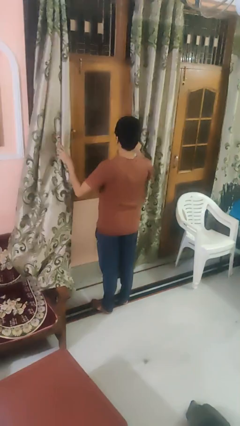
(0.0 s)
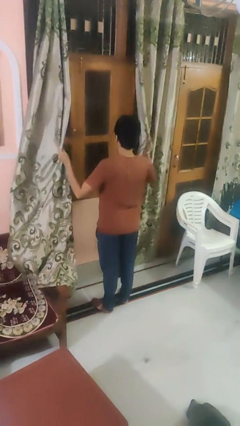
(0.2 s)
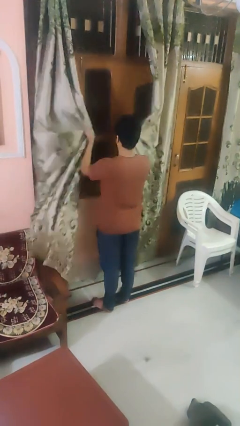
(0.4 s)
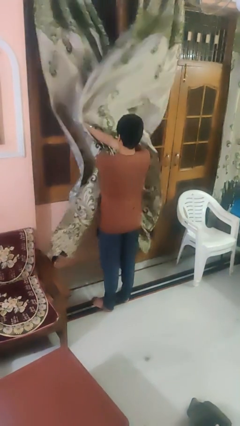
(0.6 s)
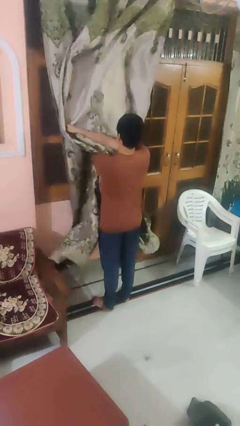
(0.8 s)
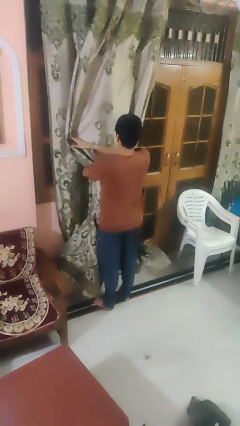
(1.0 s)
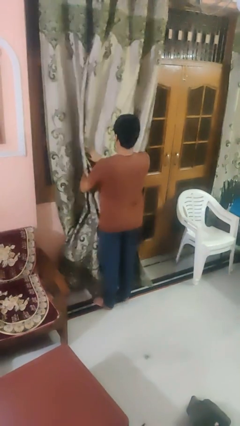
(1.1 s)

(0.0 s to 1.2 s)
person closes curtains

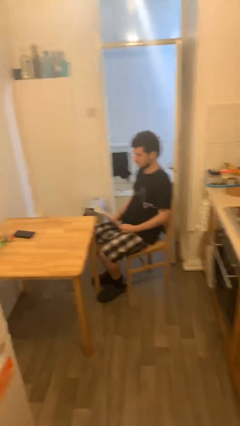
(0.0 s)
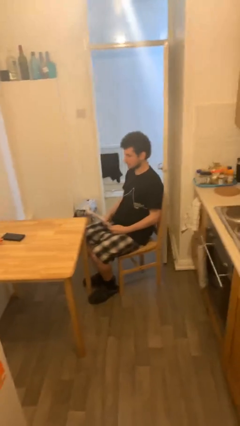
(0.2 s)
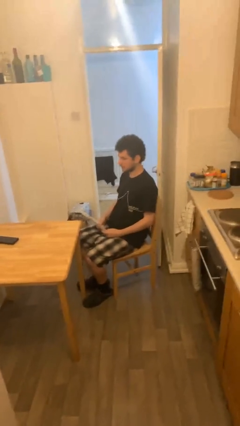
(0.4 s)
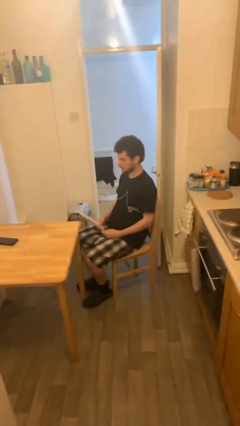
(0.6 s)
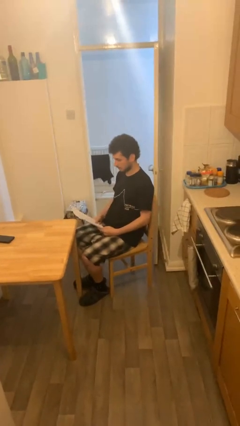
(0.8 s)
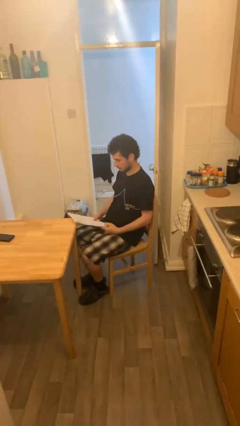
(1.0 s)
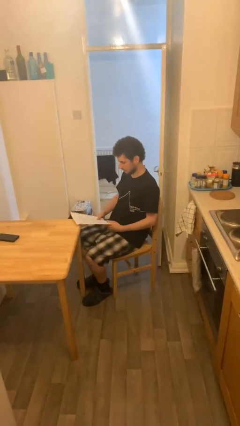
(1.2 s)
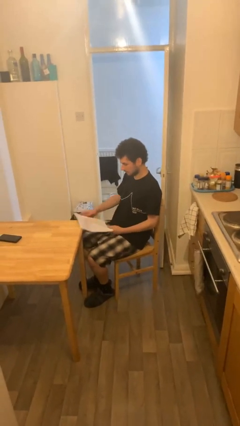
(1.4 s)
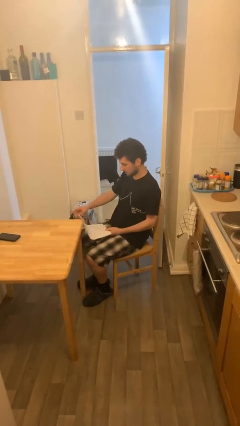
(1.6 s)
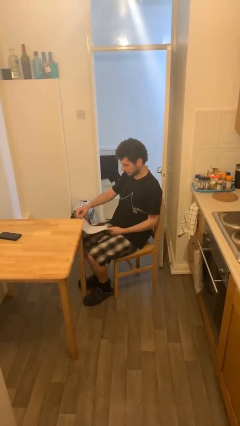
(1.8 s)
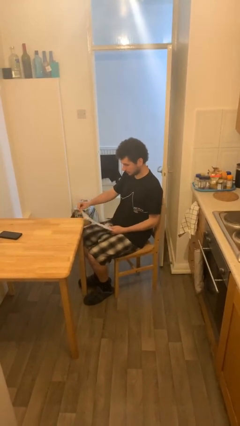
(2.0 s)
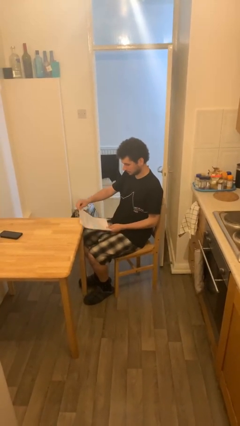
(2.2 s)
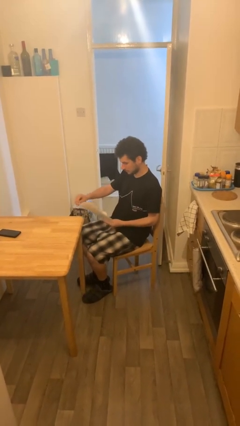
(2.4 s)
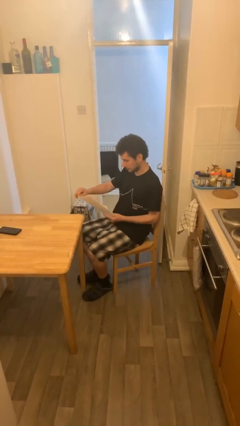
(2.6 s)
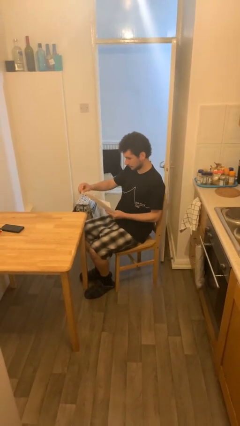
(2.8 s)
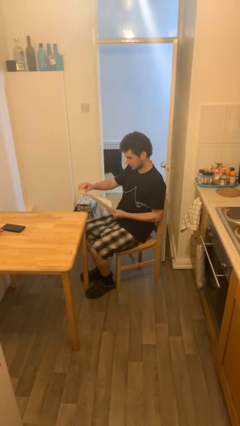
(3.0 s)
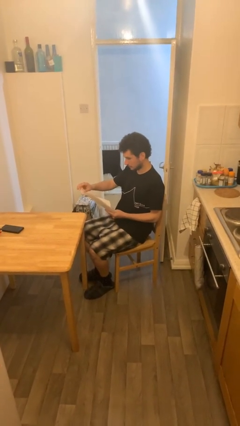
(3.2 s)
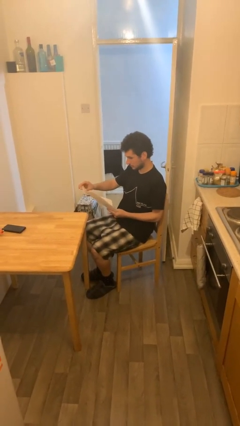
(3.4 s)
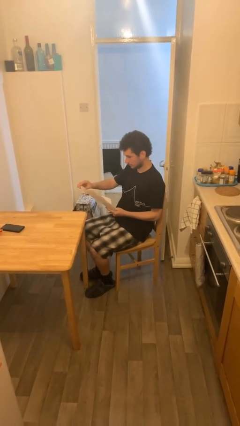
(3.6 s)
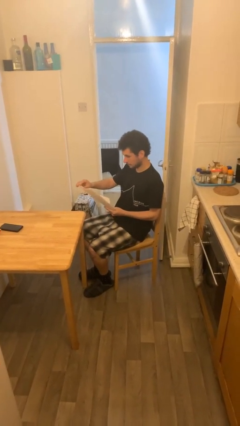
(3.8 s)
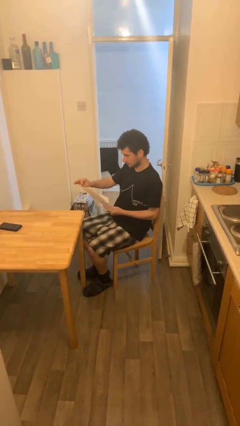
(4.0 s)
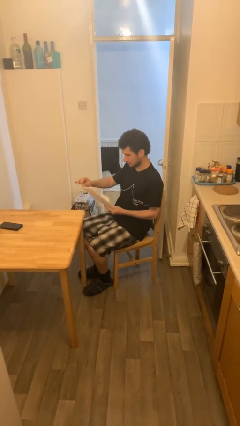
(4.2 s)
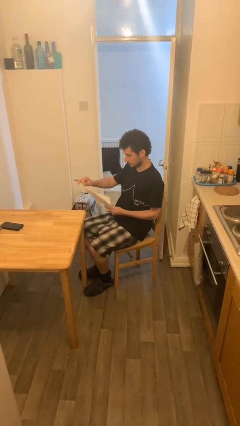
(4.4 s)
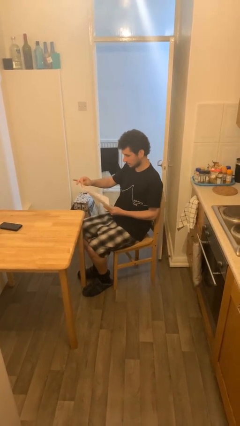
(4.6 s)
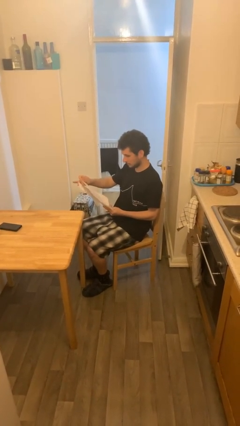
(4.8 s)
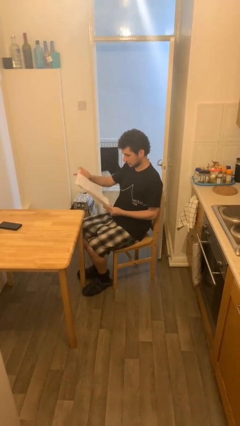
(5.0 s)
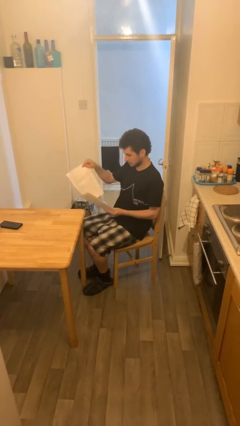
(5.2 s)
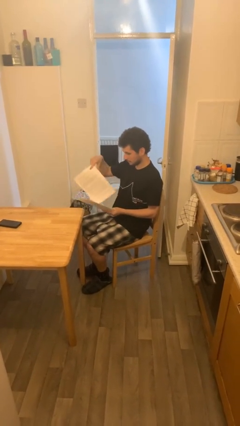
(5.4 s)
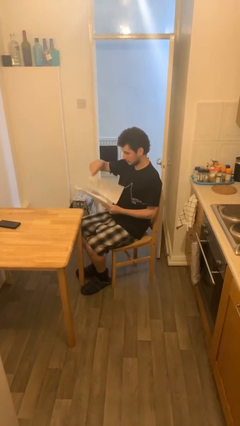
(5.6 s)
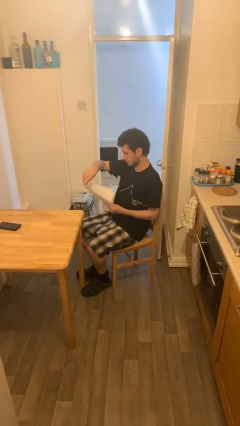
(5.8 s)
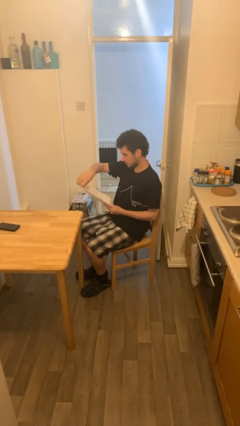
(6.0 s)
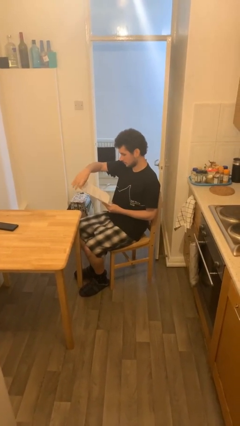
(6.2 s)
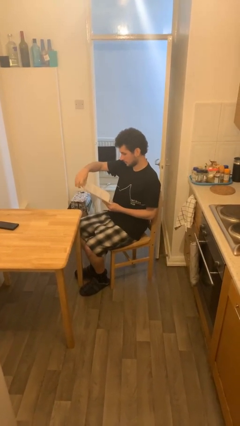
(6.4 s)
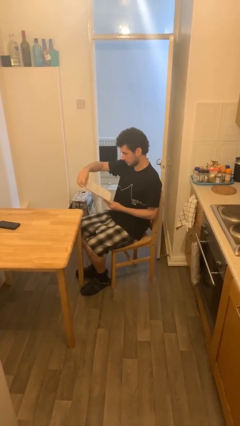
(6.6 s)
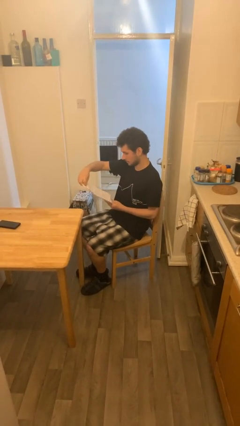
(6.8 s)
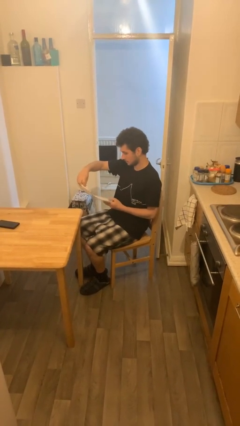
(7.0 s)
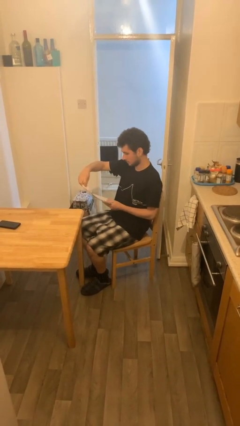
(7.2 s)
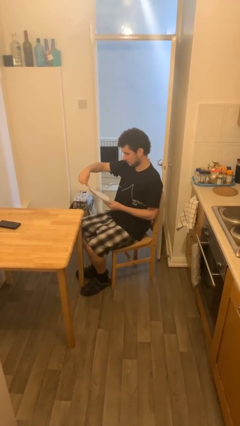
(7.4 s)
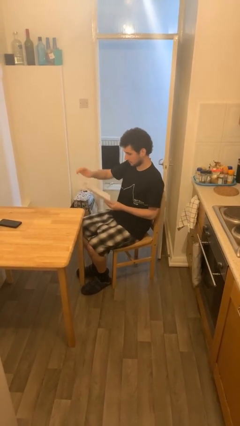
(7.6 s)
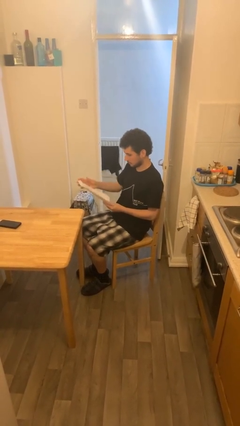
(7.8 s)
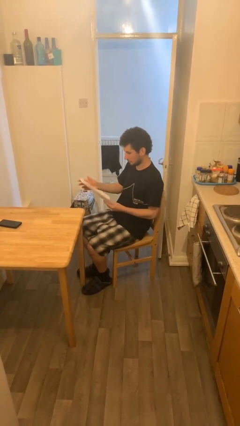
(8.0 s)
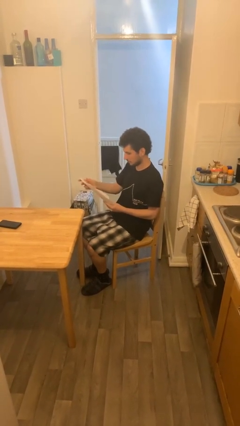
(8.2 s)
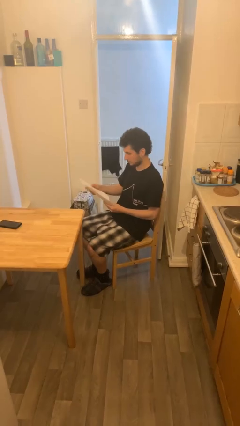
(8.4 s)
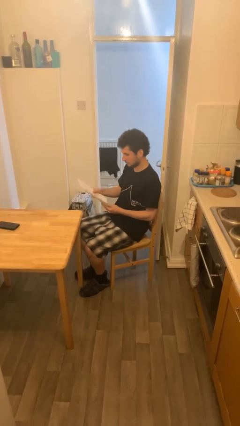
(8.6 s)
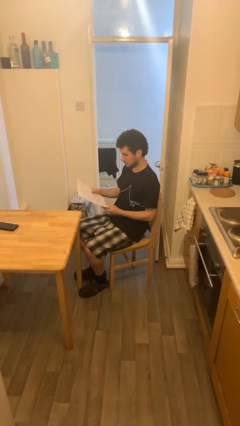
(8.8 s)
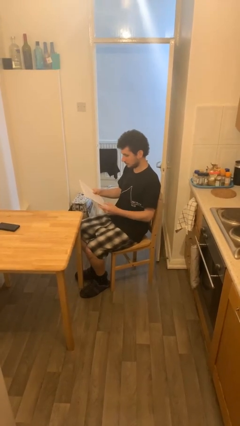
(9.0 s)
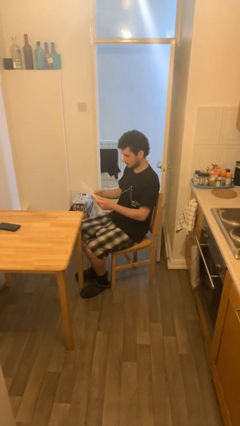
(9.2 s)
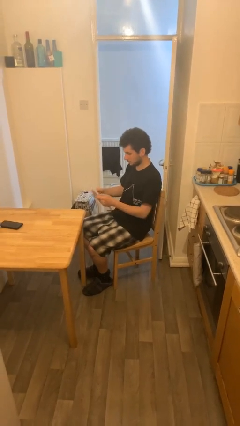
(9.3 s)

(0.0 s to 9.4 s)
person reads document

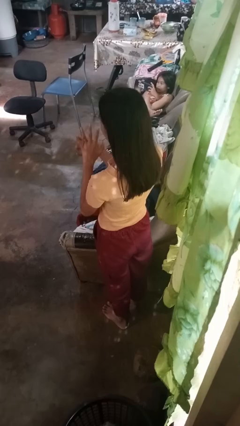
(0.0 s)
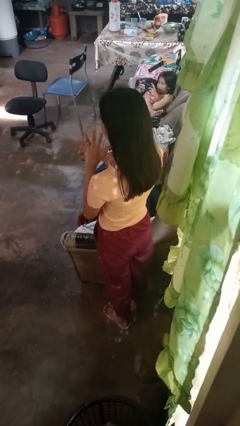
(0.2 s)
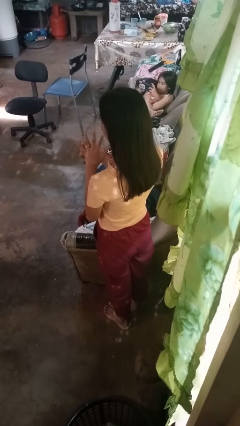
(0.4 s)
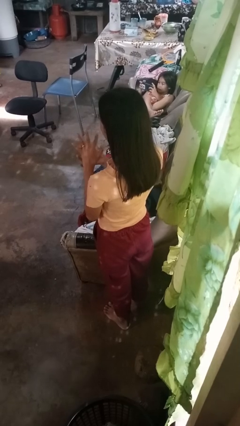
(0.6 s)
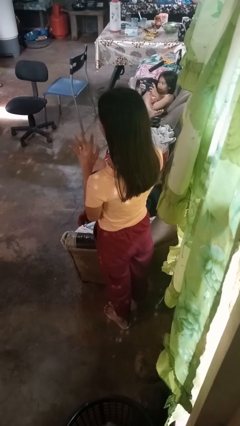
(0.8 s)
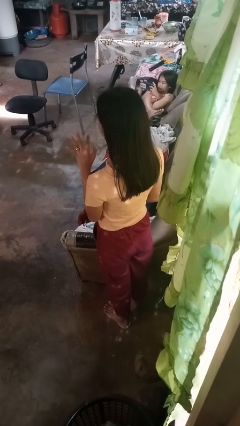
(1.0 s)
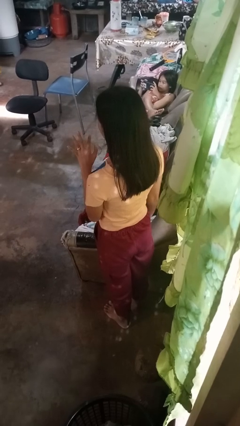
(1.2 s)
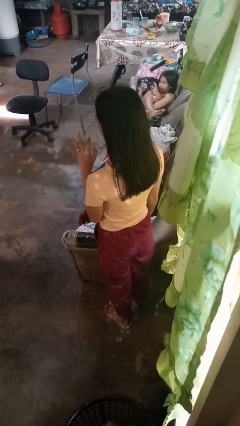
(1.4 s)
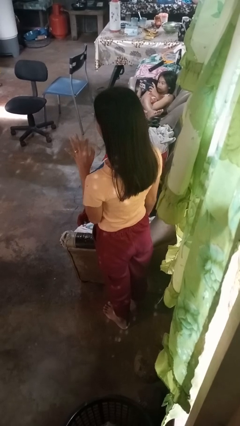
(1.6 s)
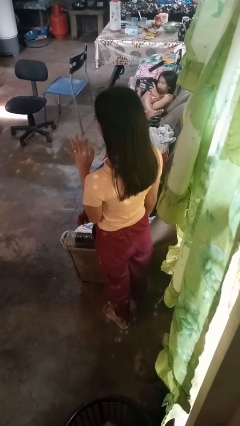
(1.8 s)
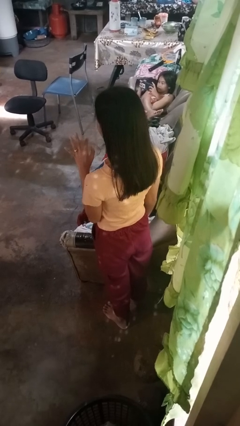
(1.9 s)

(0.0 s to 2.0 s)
person puts on ring

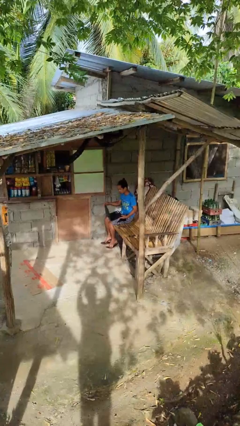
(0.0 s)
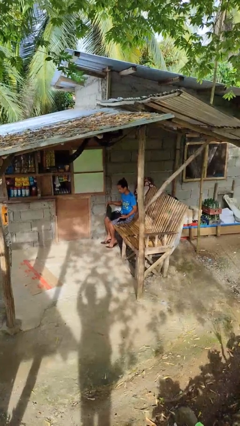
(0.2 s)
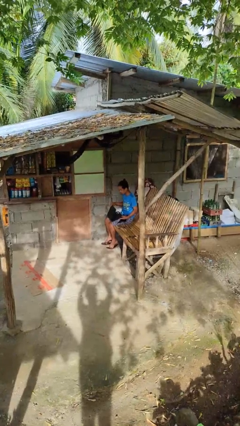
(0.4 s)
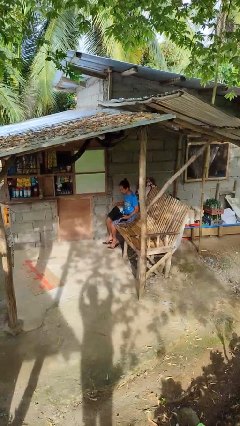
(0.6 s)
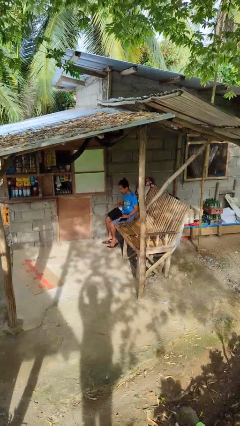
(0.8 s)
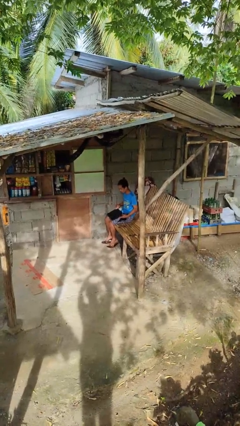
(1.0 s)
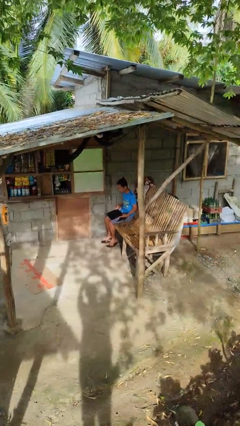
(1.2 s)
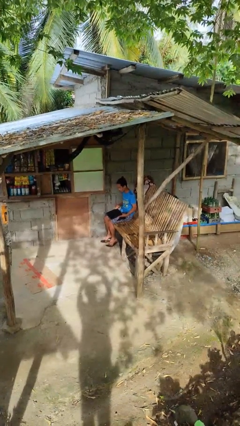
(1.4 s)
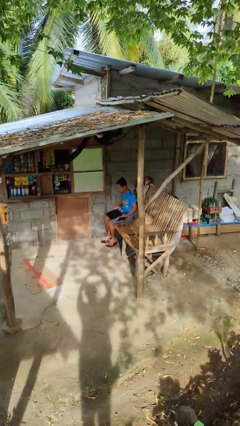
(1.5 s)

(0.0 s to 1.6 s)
person closes laptop

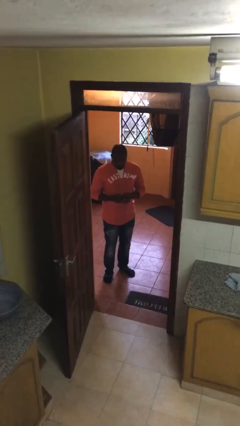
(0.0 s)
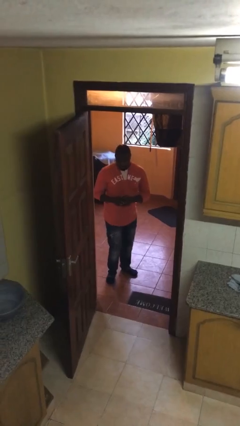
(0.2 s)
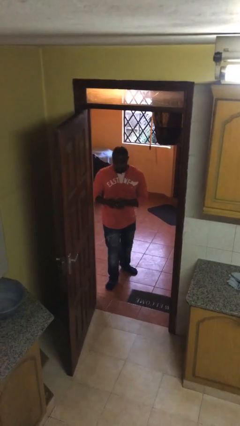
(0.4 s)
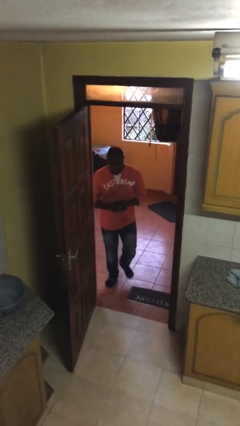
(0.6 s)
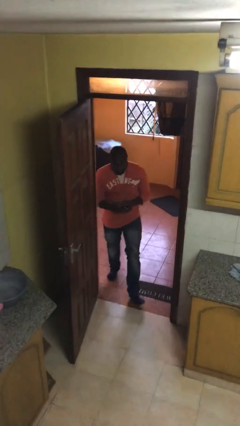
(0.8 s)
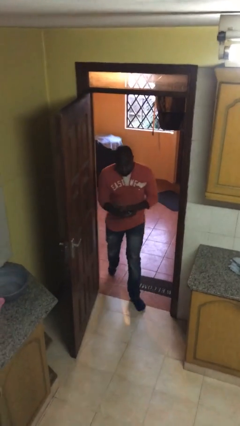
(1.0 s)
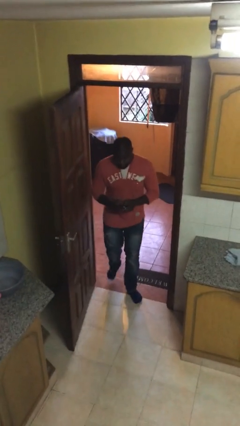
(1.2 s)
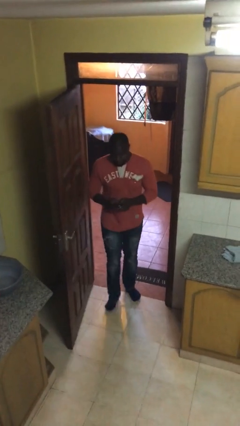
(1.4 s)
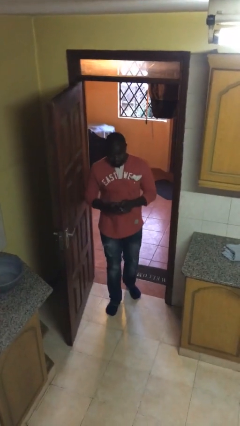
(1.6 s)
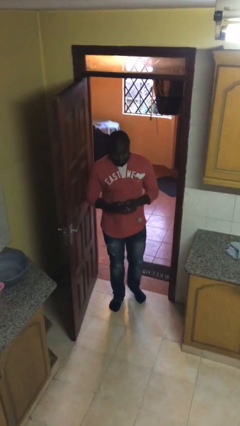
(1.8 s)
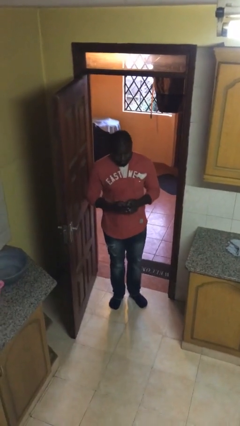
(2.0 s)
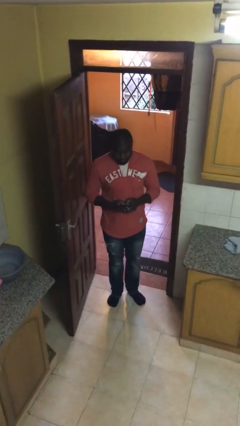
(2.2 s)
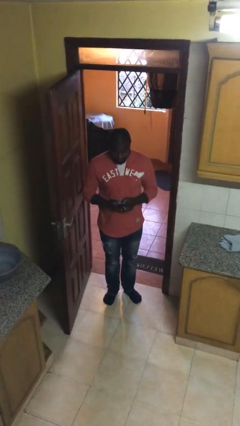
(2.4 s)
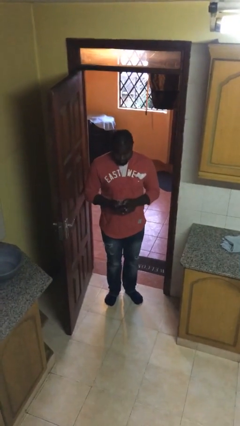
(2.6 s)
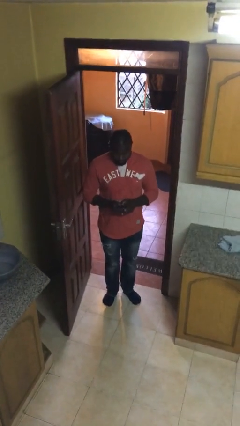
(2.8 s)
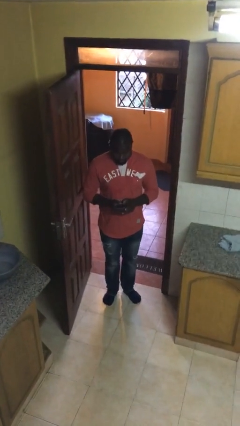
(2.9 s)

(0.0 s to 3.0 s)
person enters scene through structure

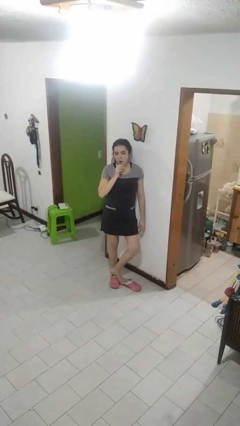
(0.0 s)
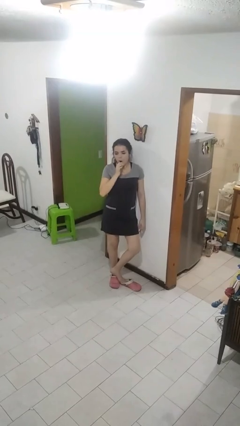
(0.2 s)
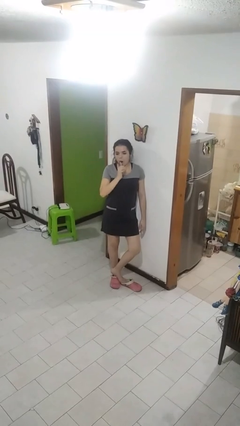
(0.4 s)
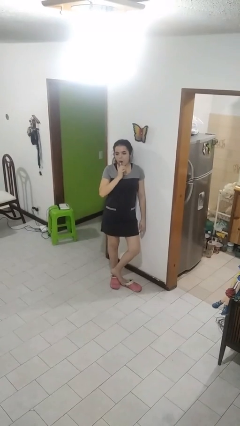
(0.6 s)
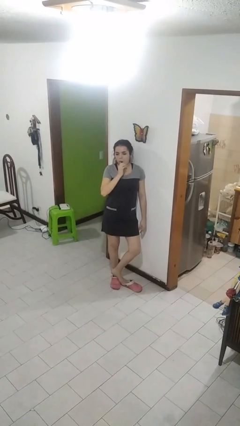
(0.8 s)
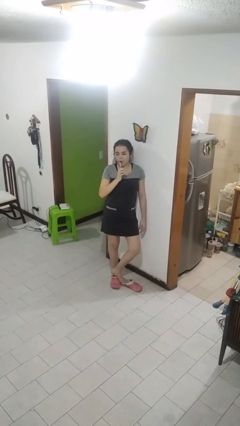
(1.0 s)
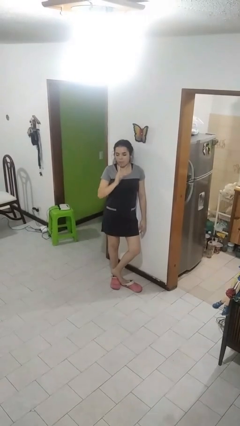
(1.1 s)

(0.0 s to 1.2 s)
person brushes teeth
